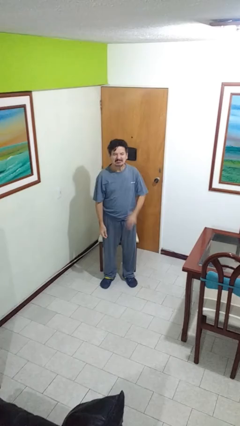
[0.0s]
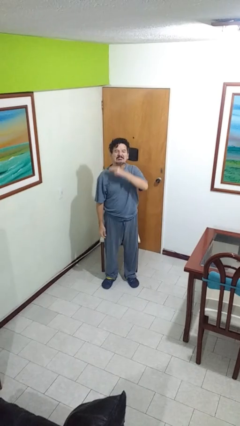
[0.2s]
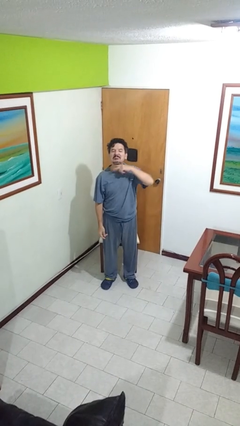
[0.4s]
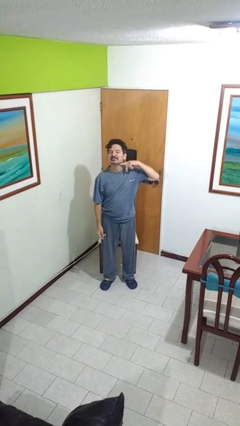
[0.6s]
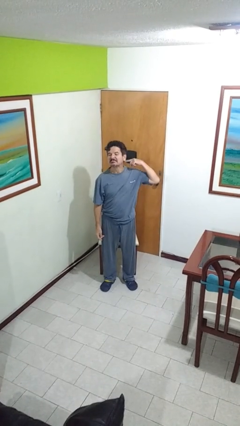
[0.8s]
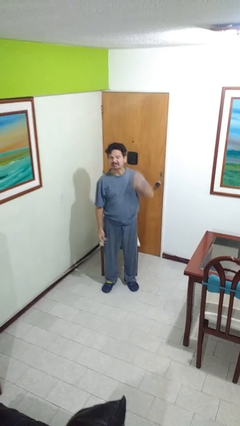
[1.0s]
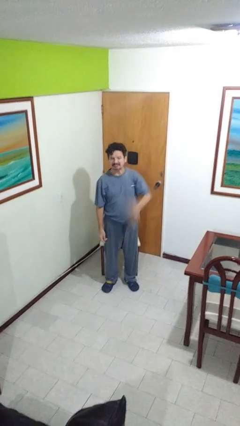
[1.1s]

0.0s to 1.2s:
person gestures cut

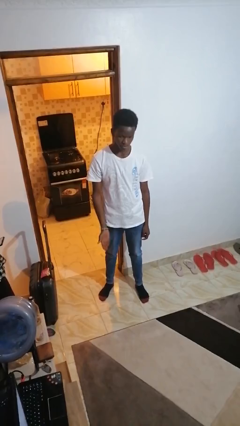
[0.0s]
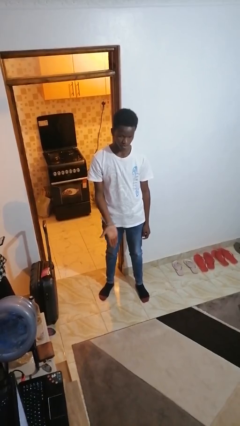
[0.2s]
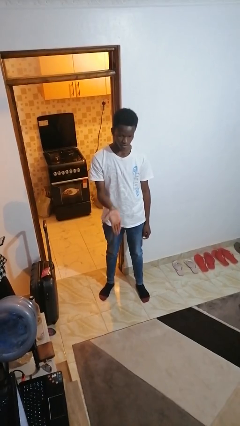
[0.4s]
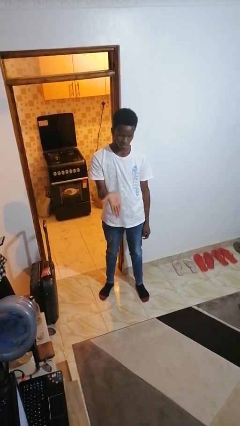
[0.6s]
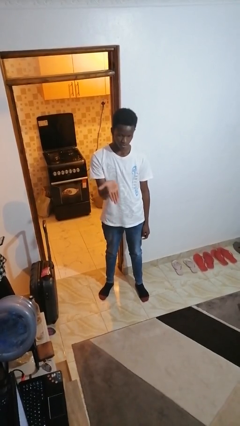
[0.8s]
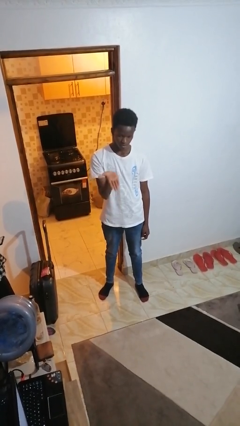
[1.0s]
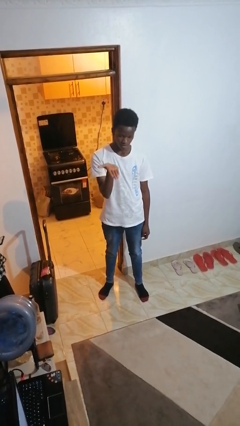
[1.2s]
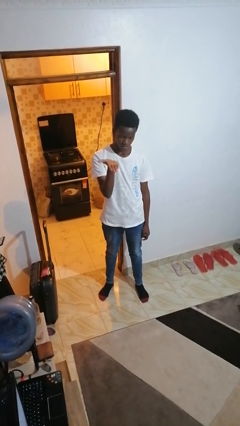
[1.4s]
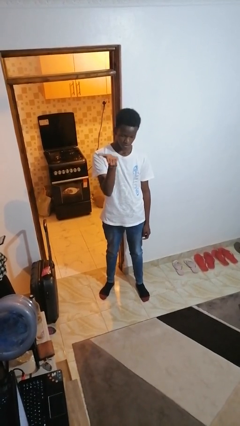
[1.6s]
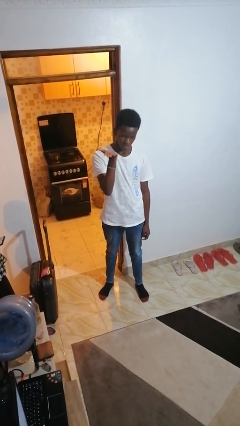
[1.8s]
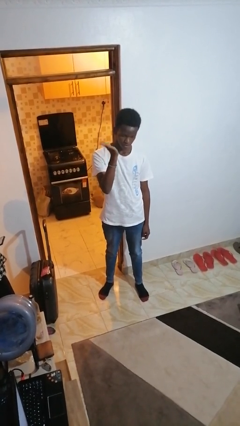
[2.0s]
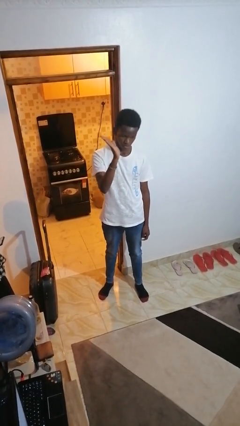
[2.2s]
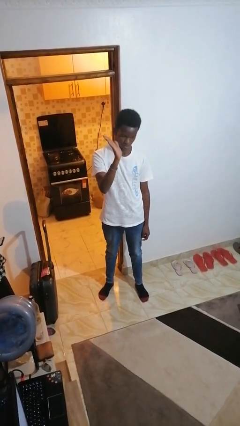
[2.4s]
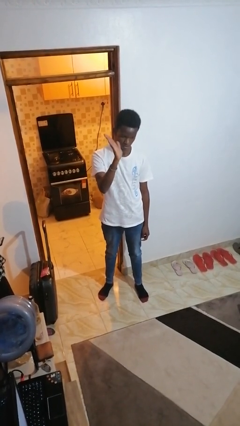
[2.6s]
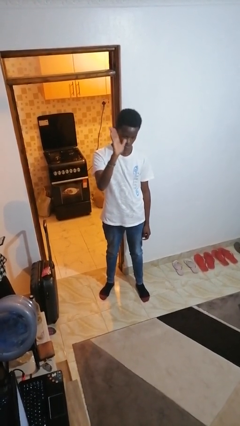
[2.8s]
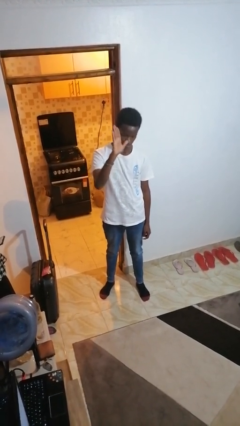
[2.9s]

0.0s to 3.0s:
person gestures swipe up

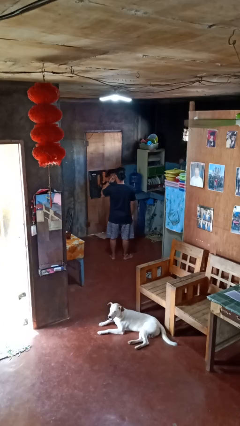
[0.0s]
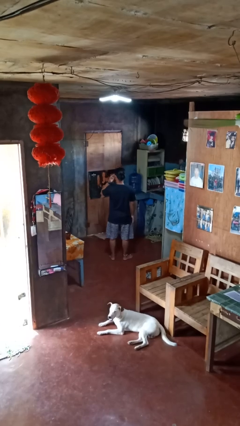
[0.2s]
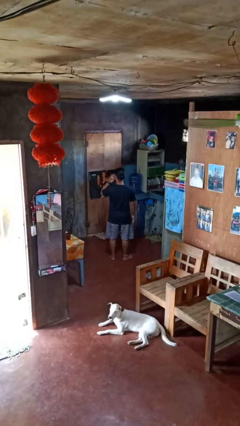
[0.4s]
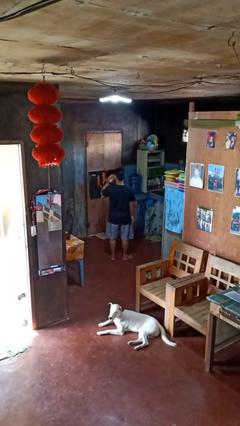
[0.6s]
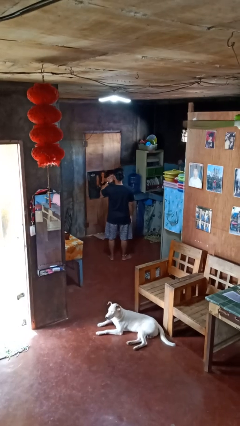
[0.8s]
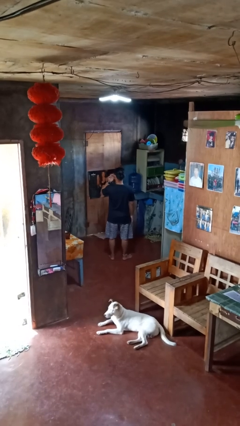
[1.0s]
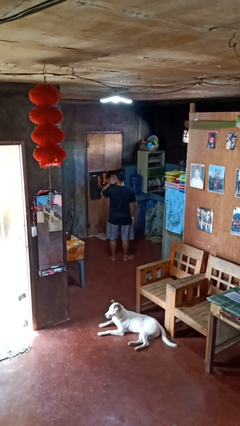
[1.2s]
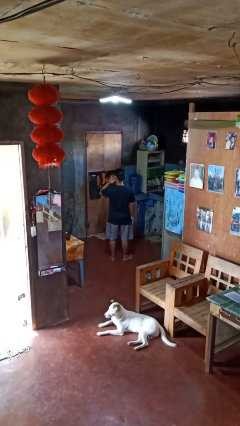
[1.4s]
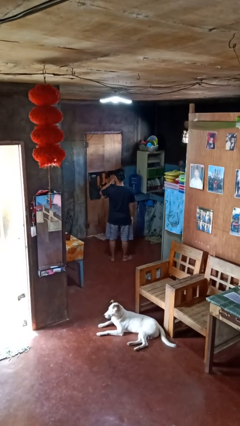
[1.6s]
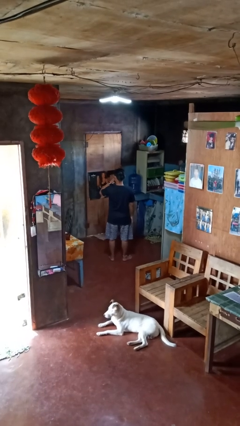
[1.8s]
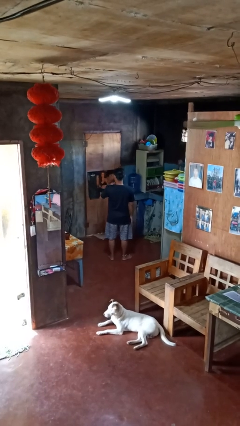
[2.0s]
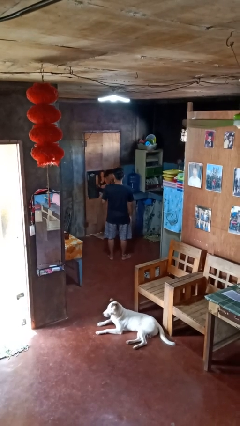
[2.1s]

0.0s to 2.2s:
person licks fingers

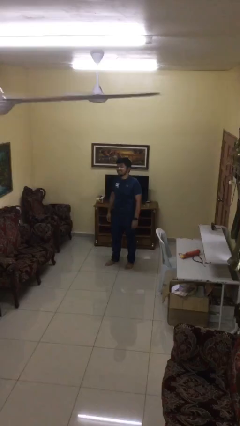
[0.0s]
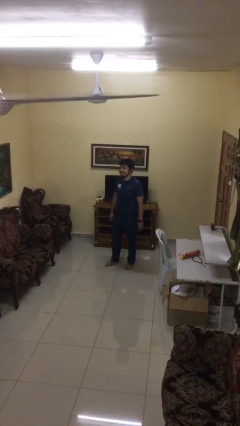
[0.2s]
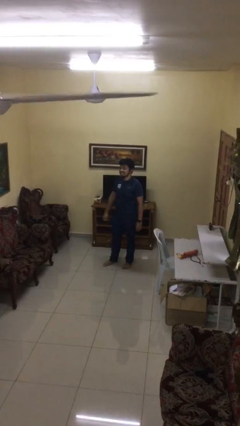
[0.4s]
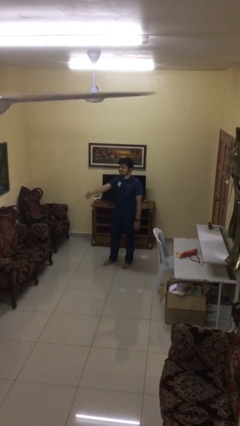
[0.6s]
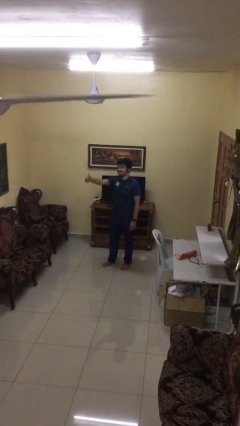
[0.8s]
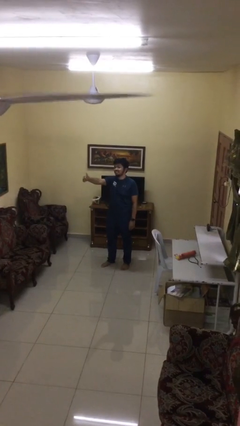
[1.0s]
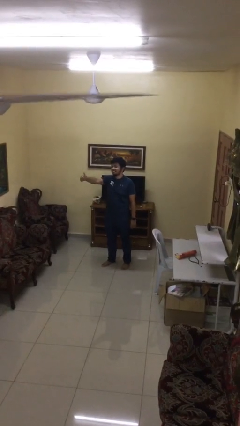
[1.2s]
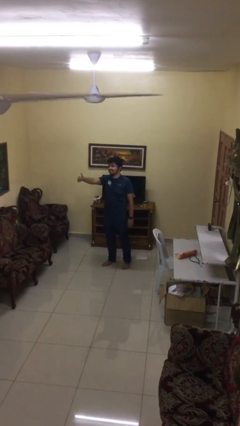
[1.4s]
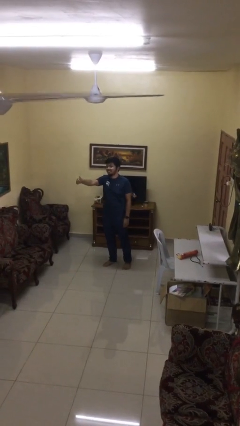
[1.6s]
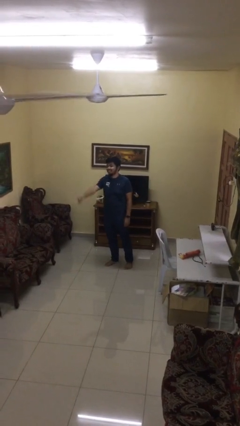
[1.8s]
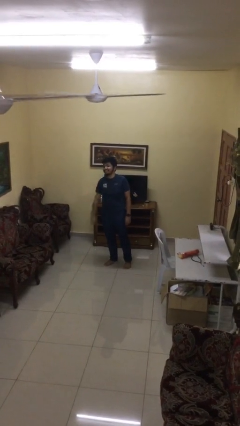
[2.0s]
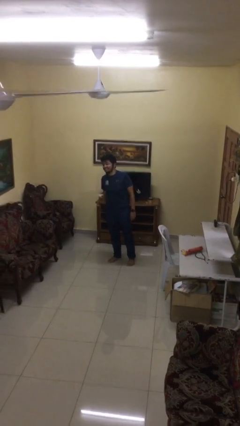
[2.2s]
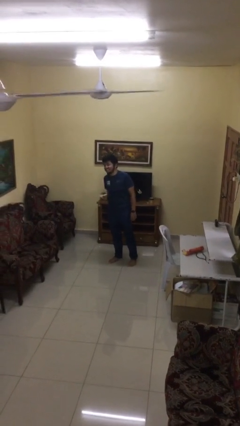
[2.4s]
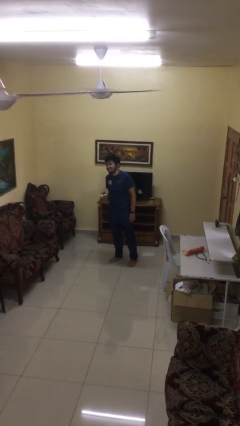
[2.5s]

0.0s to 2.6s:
person gestures thumbs up

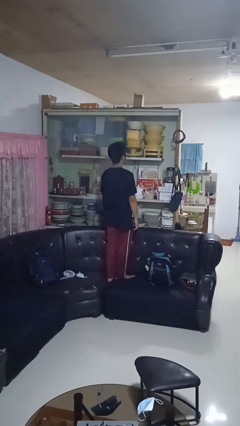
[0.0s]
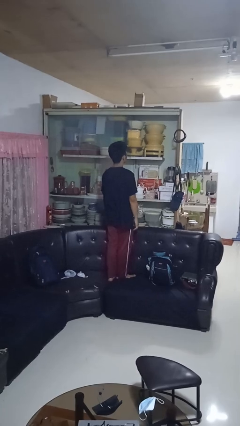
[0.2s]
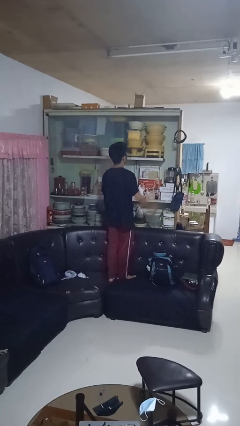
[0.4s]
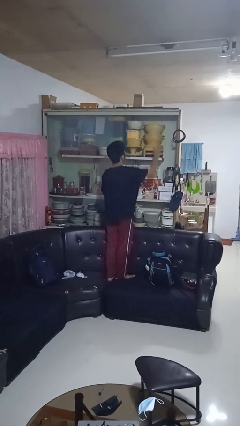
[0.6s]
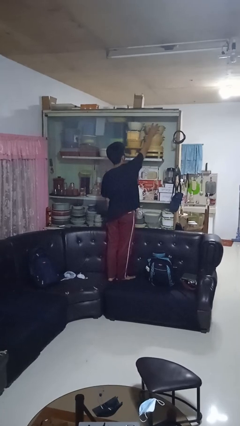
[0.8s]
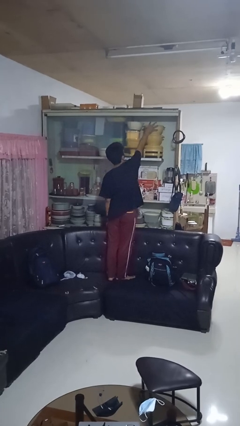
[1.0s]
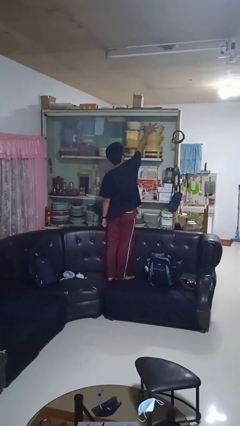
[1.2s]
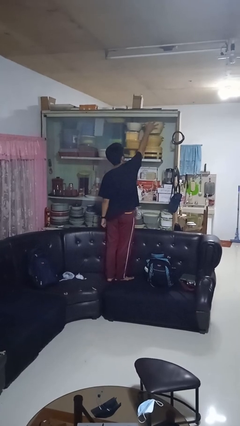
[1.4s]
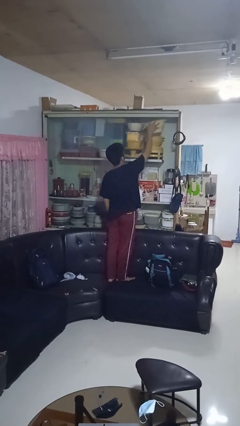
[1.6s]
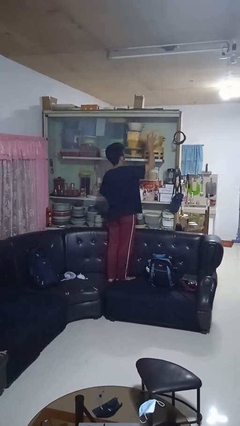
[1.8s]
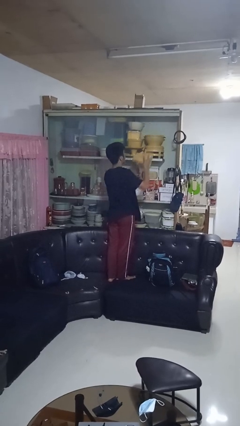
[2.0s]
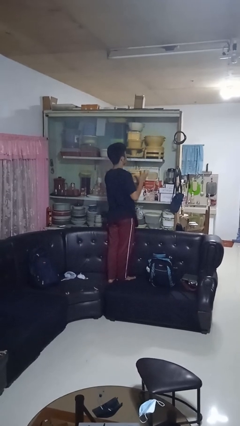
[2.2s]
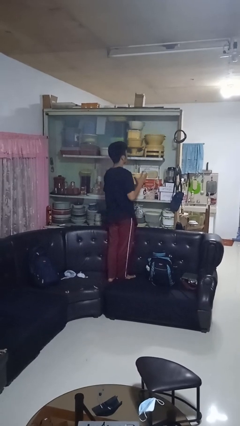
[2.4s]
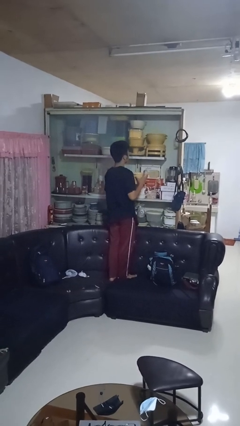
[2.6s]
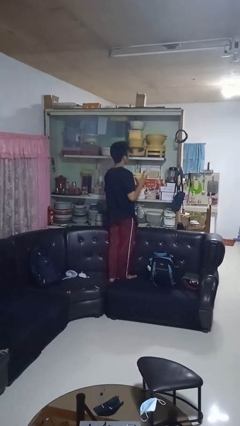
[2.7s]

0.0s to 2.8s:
person picks up object from cabinet

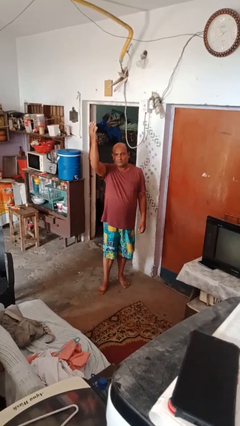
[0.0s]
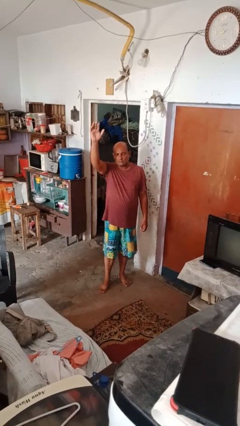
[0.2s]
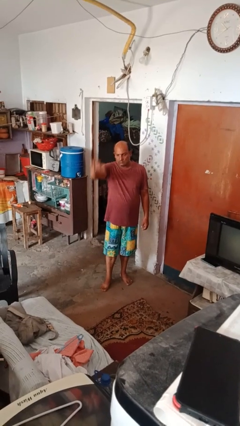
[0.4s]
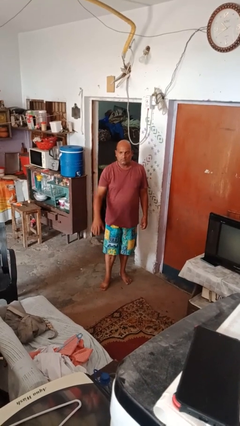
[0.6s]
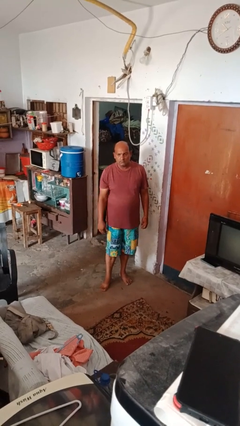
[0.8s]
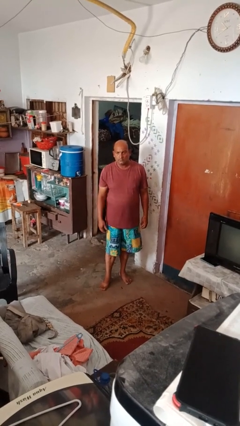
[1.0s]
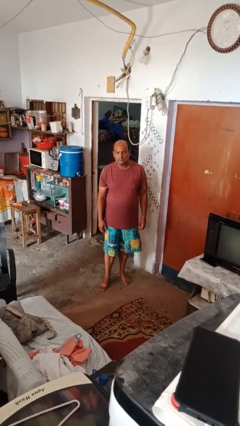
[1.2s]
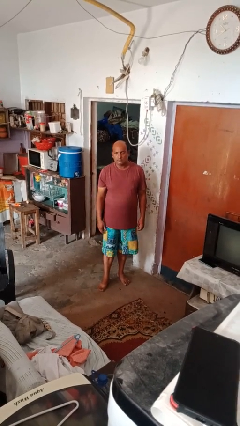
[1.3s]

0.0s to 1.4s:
person gestures swipe down

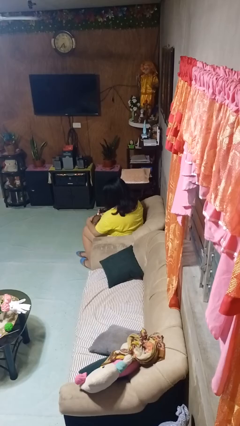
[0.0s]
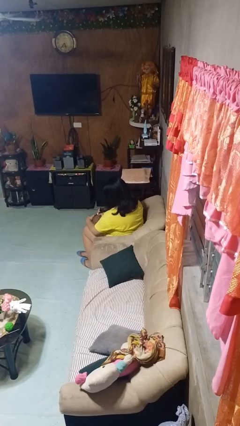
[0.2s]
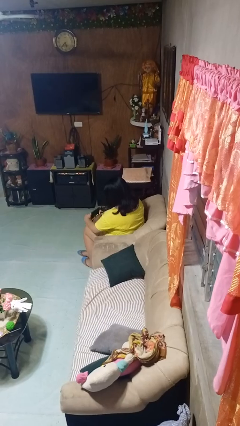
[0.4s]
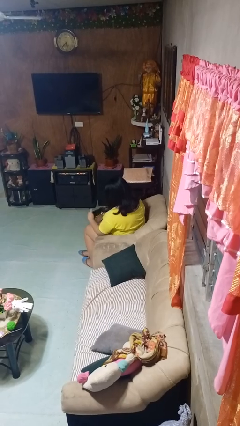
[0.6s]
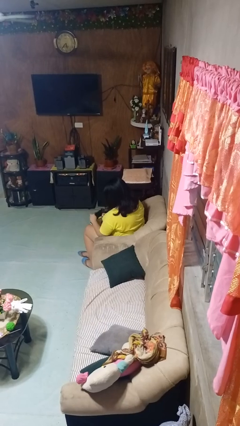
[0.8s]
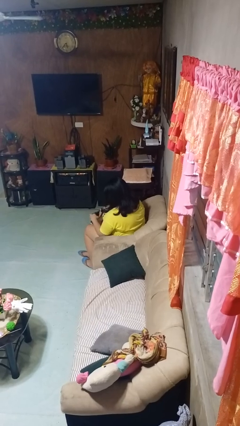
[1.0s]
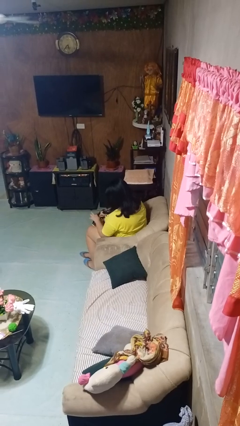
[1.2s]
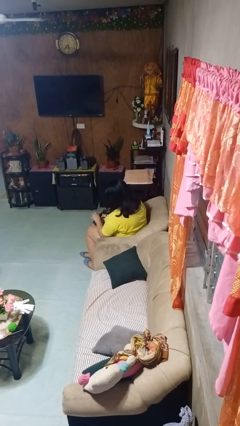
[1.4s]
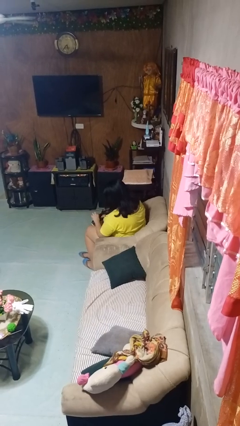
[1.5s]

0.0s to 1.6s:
person searches in purse

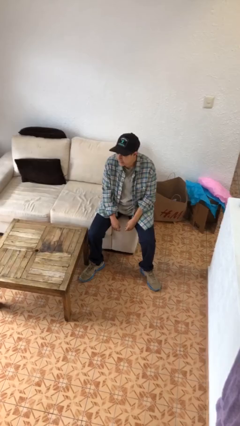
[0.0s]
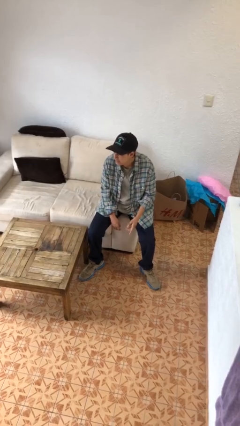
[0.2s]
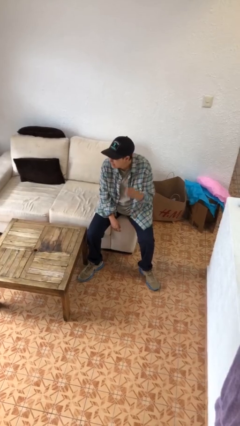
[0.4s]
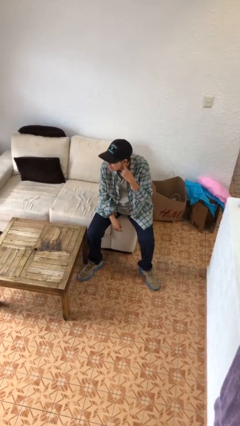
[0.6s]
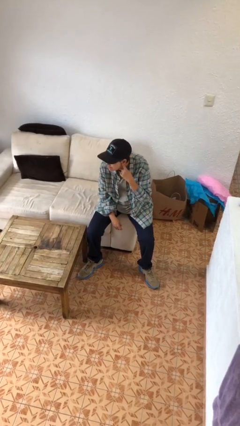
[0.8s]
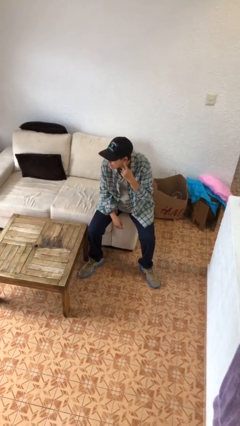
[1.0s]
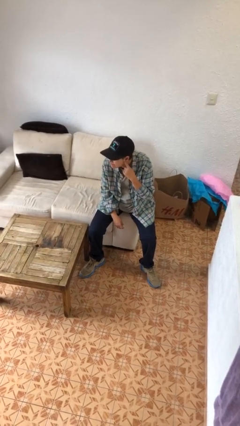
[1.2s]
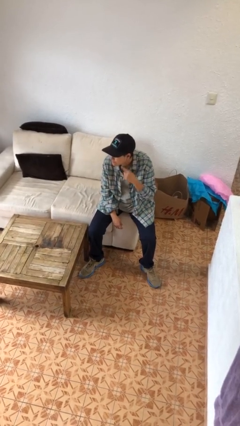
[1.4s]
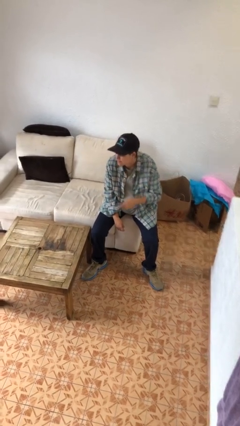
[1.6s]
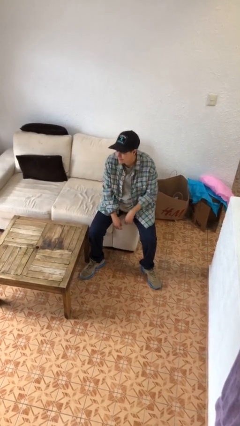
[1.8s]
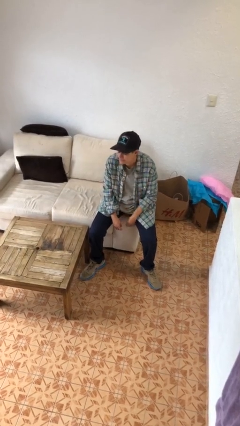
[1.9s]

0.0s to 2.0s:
person gestures listen closely
